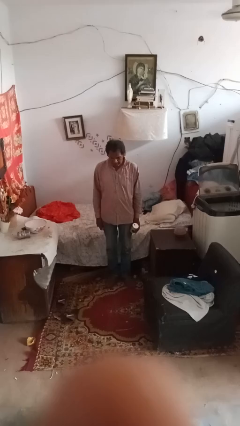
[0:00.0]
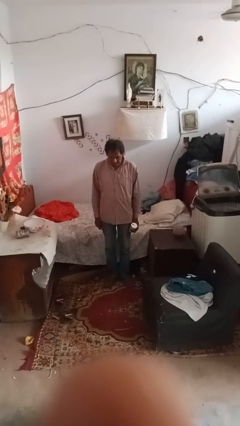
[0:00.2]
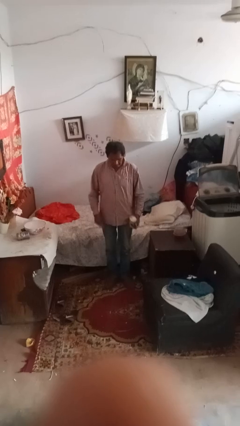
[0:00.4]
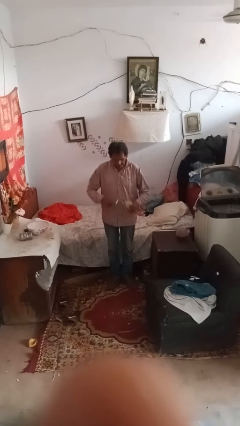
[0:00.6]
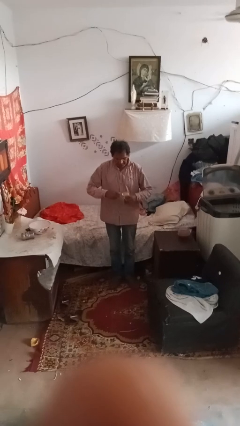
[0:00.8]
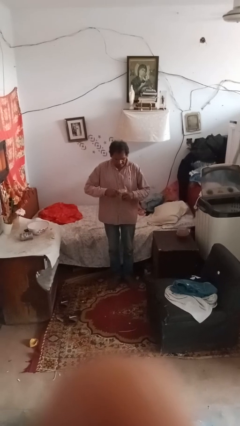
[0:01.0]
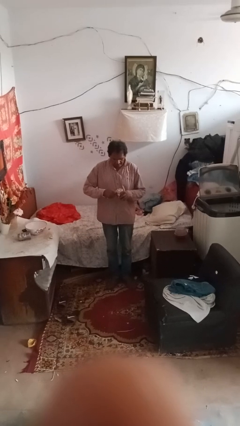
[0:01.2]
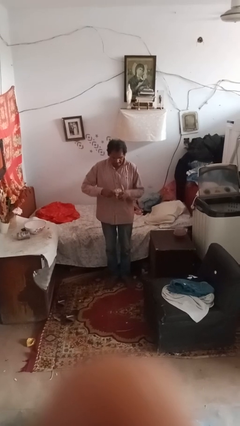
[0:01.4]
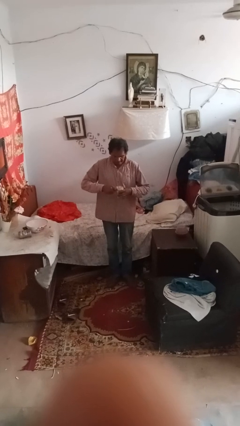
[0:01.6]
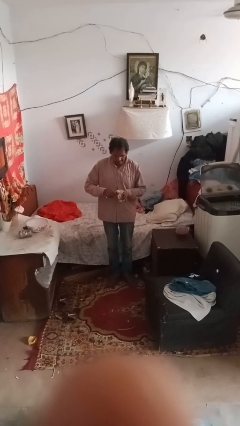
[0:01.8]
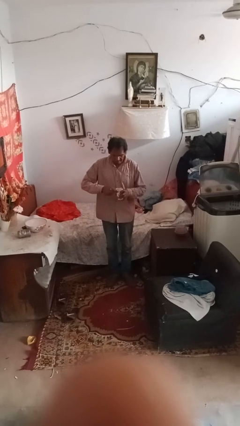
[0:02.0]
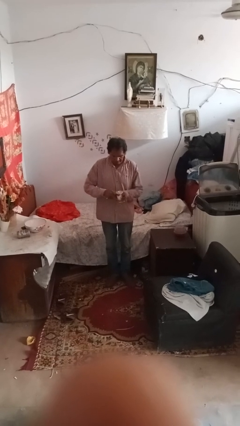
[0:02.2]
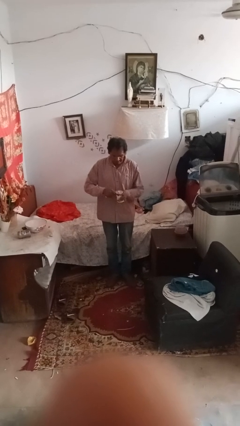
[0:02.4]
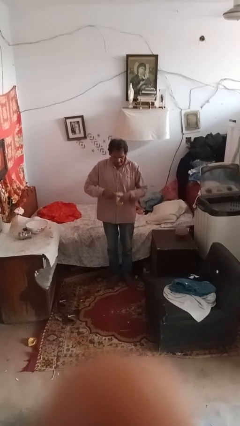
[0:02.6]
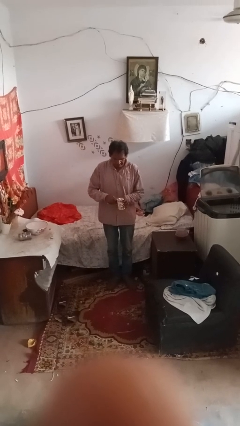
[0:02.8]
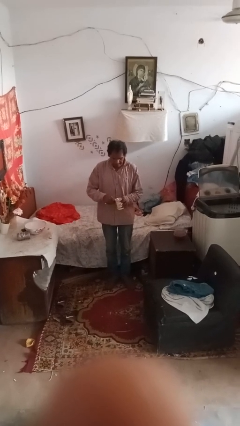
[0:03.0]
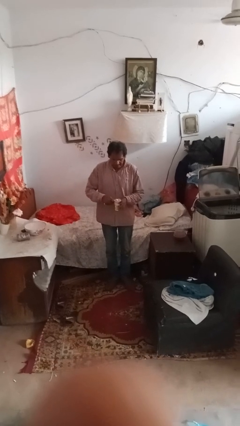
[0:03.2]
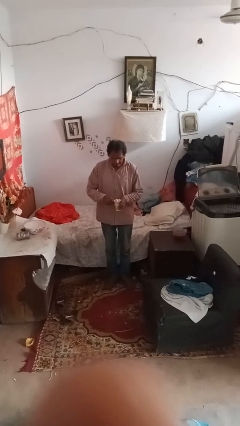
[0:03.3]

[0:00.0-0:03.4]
person opens can with can opener

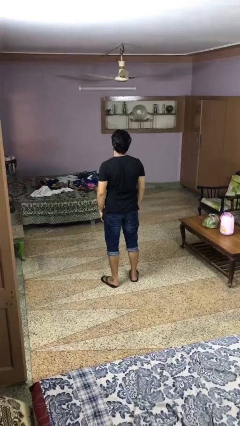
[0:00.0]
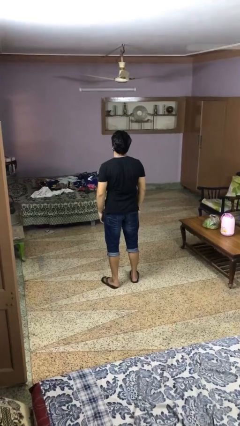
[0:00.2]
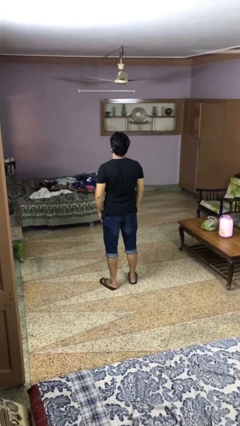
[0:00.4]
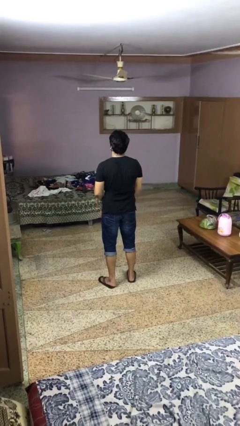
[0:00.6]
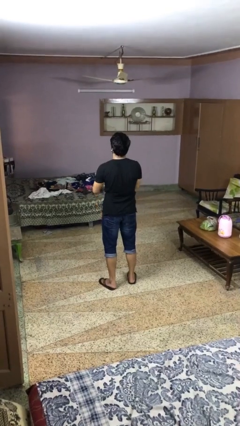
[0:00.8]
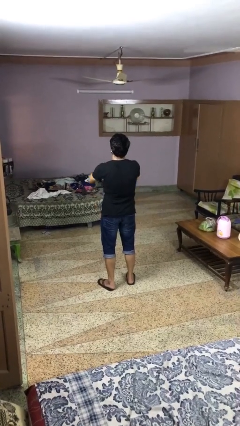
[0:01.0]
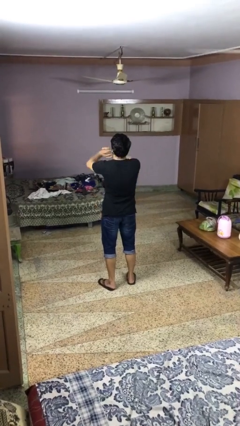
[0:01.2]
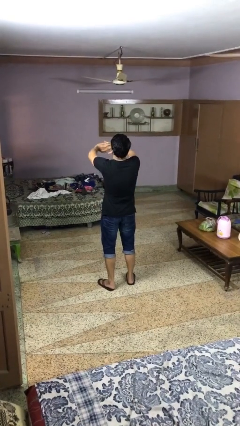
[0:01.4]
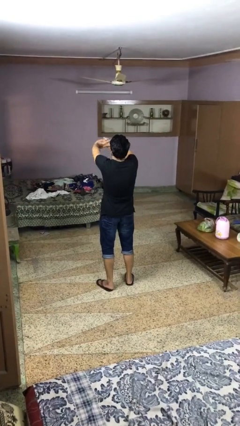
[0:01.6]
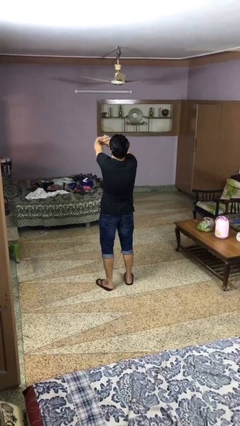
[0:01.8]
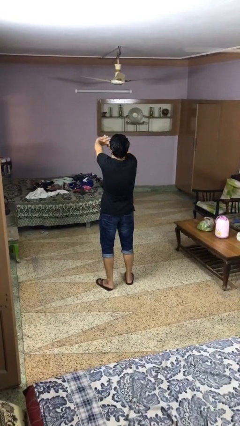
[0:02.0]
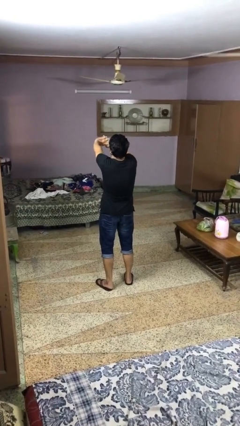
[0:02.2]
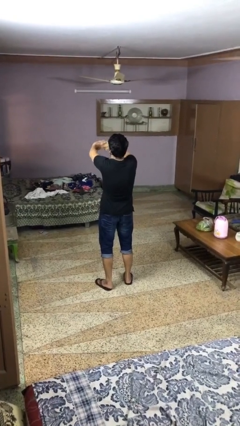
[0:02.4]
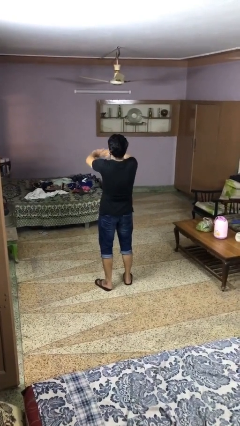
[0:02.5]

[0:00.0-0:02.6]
person cracks knuckles

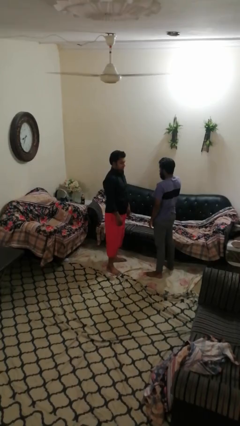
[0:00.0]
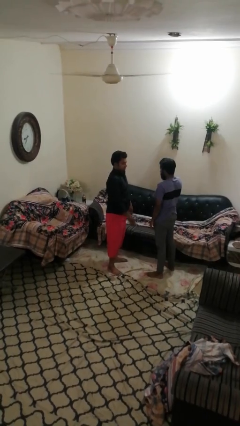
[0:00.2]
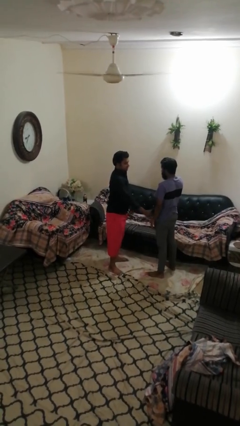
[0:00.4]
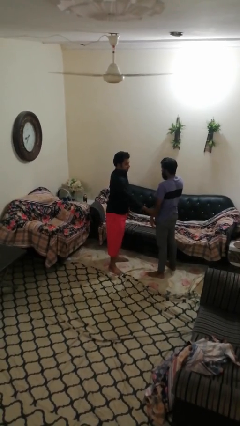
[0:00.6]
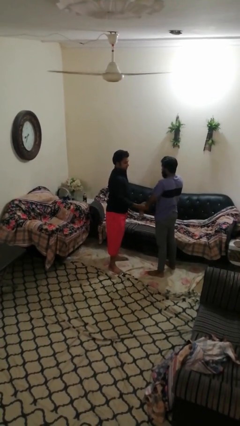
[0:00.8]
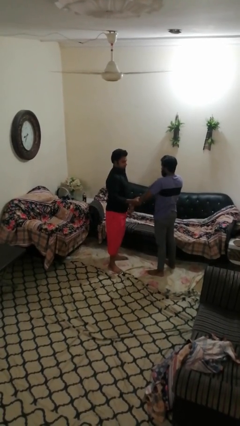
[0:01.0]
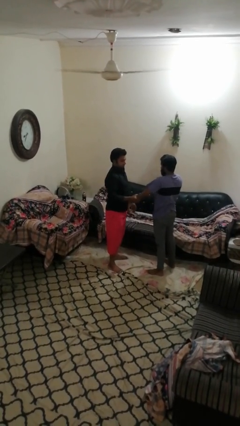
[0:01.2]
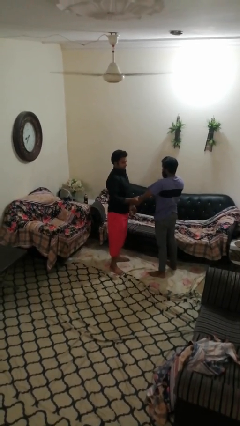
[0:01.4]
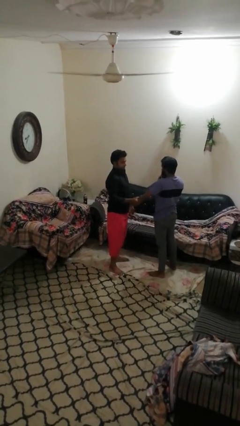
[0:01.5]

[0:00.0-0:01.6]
person grabs person by forearm

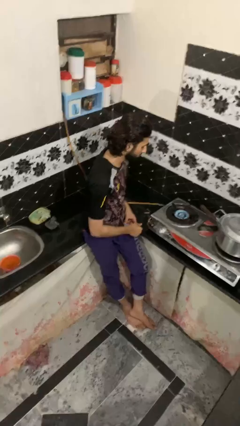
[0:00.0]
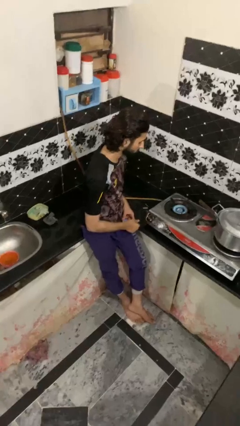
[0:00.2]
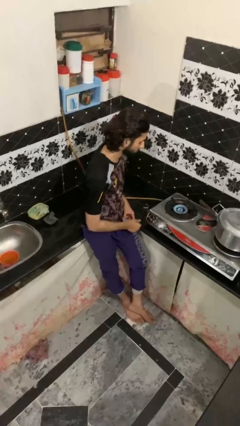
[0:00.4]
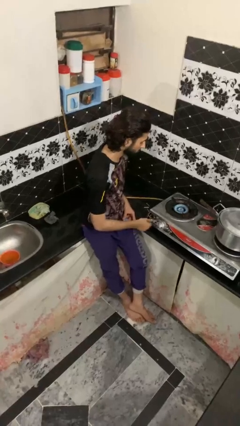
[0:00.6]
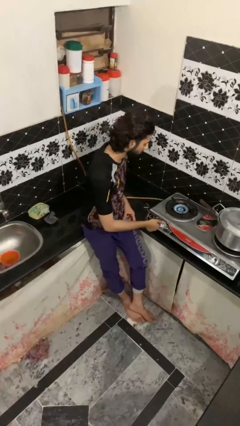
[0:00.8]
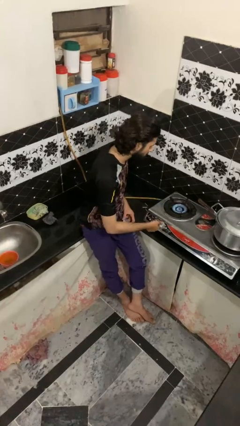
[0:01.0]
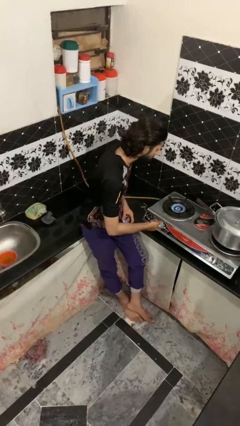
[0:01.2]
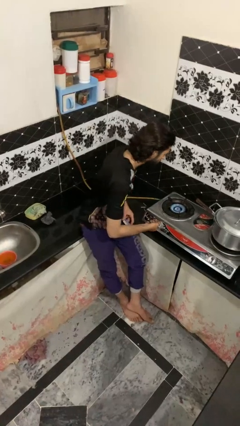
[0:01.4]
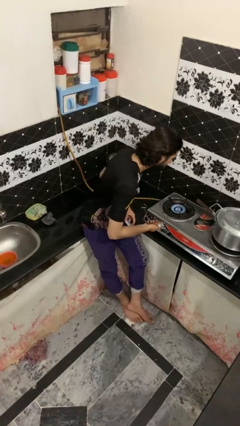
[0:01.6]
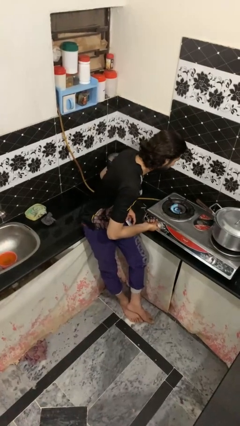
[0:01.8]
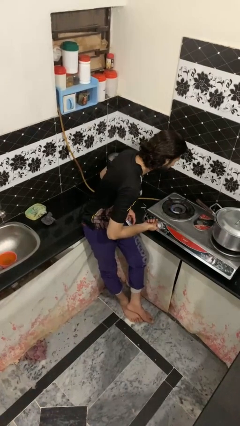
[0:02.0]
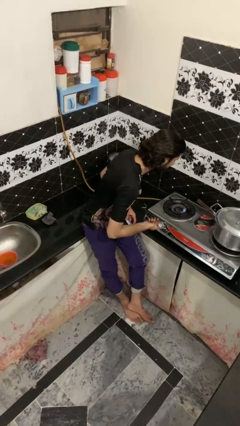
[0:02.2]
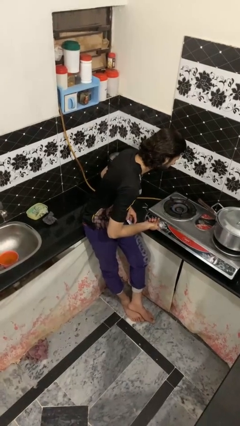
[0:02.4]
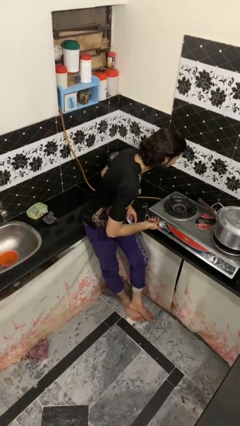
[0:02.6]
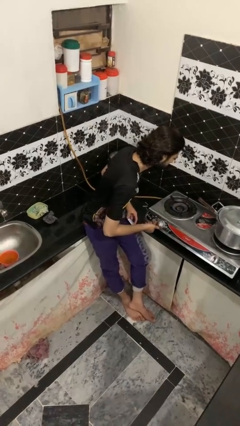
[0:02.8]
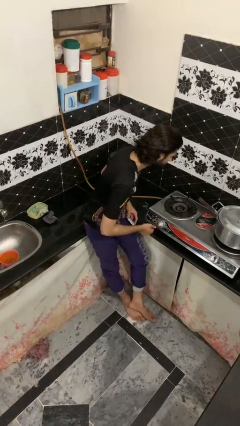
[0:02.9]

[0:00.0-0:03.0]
person turns off stovetop

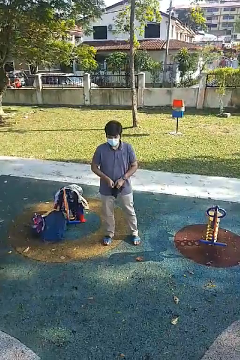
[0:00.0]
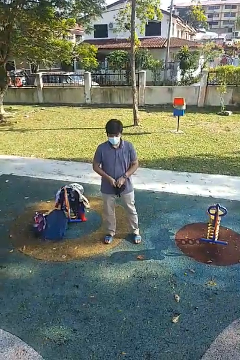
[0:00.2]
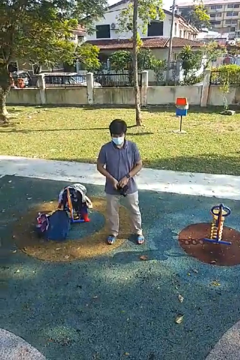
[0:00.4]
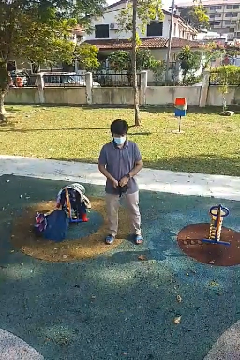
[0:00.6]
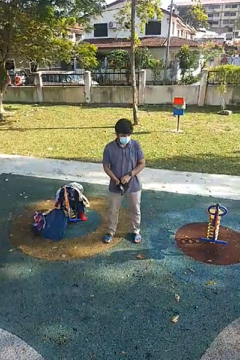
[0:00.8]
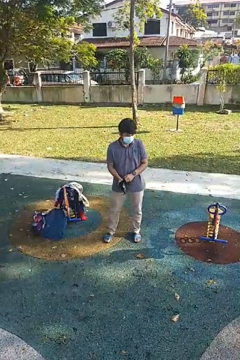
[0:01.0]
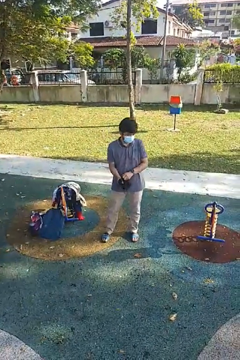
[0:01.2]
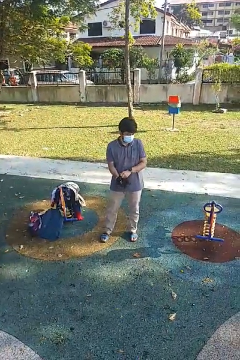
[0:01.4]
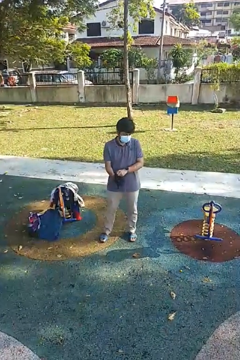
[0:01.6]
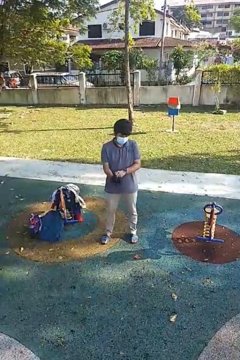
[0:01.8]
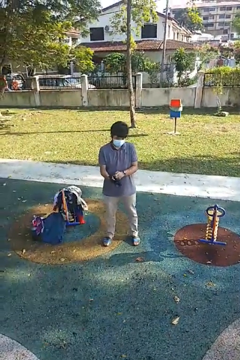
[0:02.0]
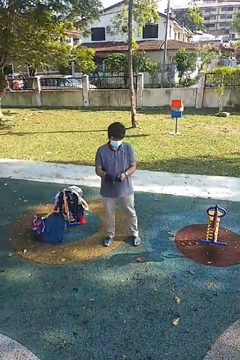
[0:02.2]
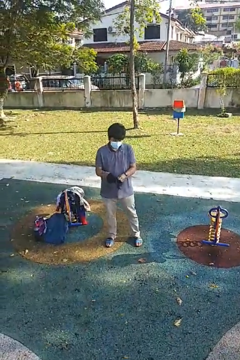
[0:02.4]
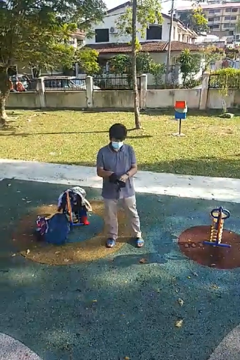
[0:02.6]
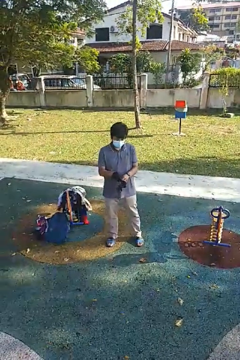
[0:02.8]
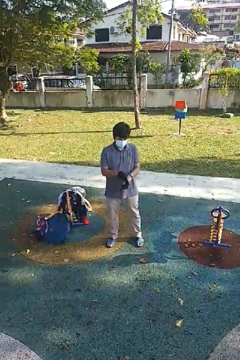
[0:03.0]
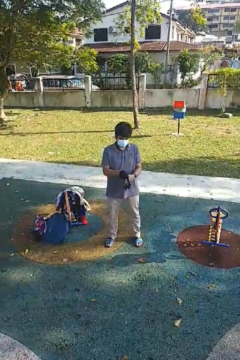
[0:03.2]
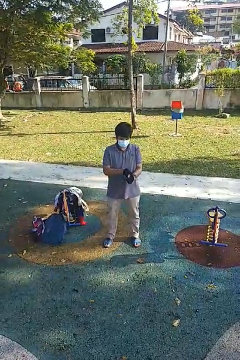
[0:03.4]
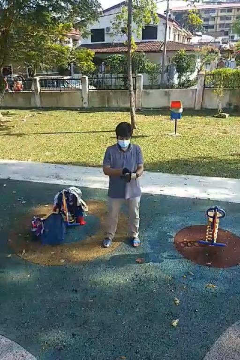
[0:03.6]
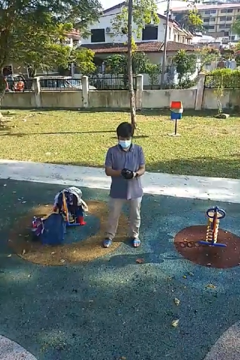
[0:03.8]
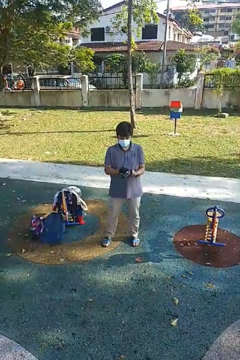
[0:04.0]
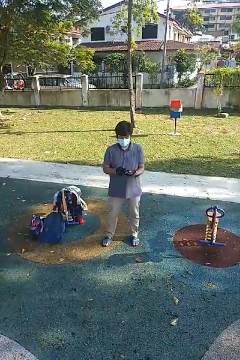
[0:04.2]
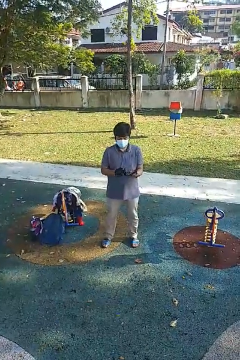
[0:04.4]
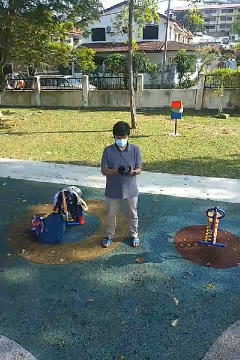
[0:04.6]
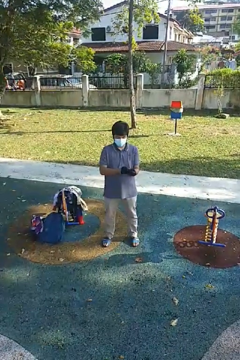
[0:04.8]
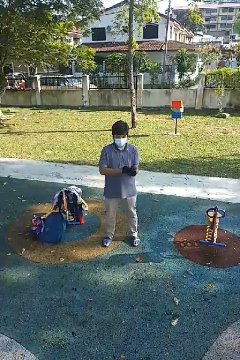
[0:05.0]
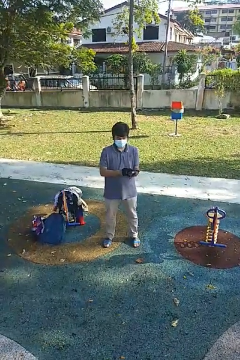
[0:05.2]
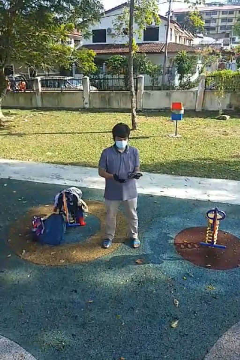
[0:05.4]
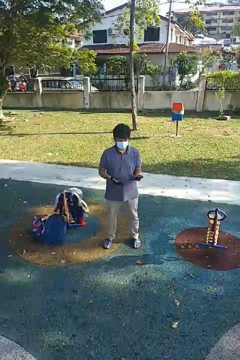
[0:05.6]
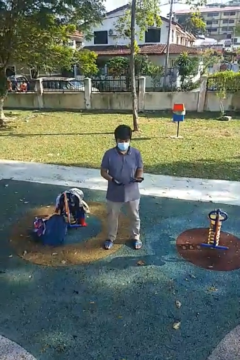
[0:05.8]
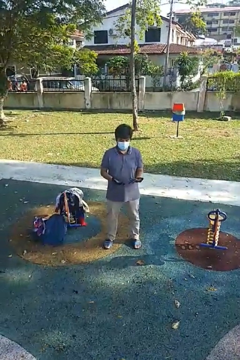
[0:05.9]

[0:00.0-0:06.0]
person puts on gloves

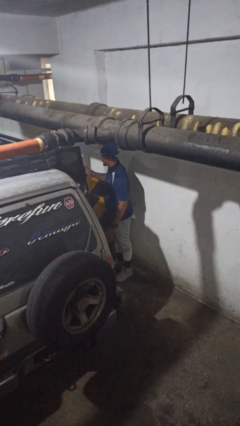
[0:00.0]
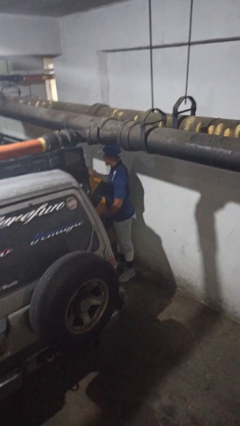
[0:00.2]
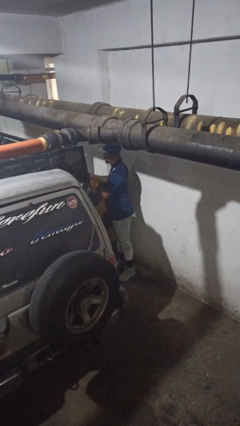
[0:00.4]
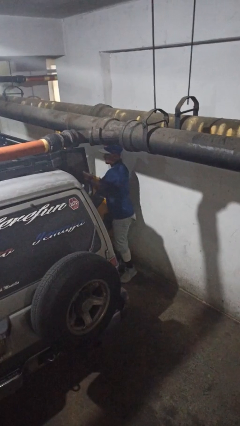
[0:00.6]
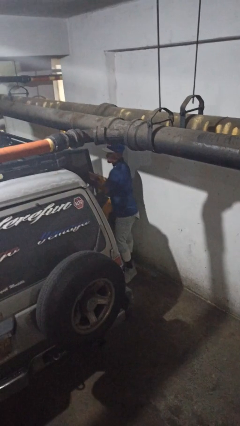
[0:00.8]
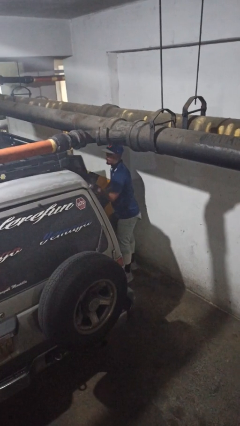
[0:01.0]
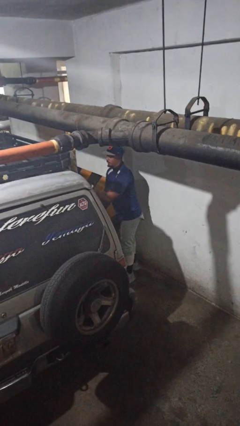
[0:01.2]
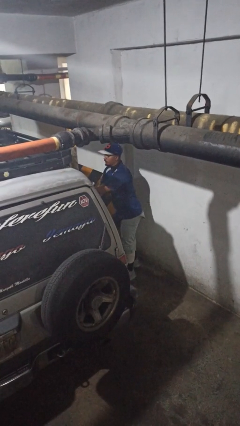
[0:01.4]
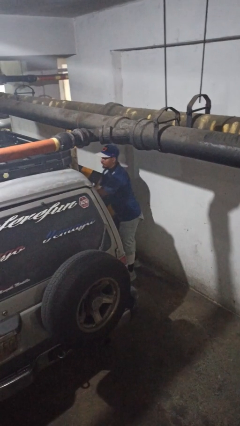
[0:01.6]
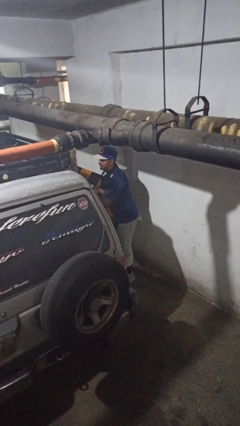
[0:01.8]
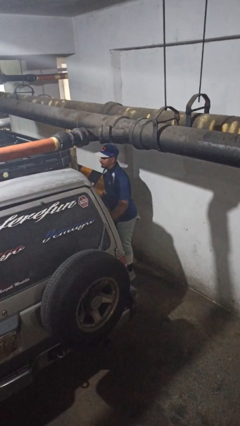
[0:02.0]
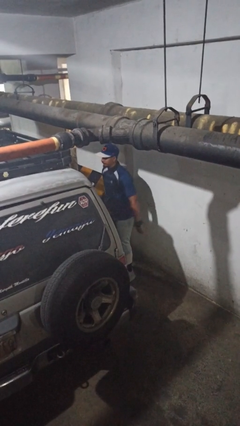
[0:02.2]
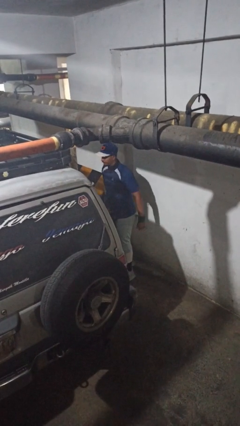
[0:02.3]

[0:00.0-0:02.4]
person closes car door
